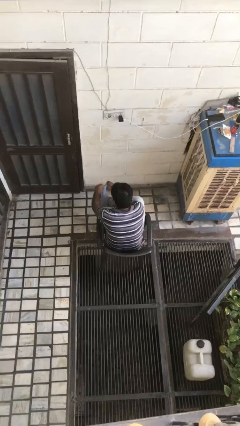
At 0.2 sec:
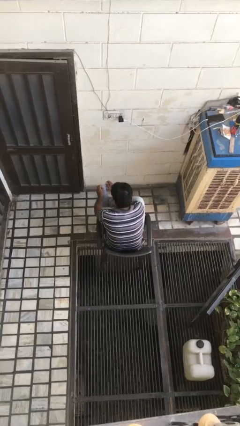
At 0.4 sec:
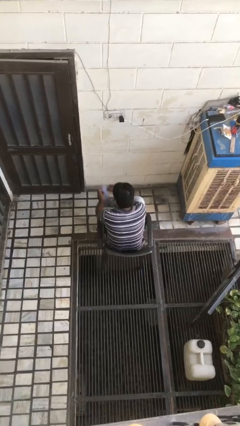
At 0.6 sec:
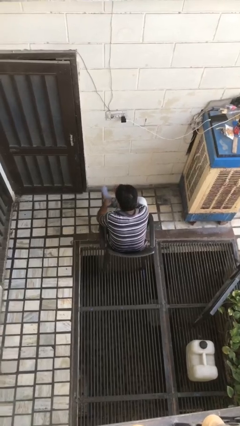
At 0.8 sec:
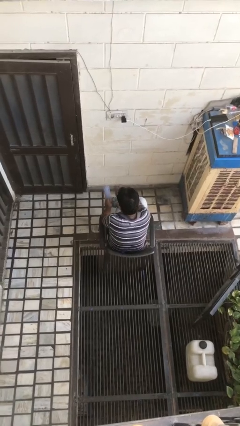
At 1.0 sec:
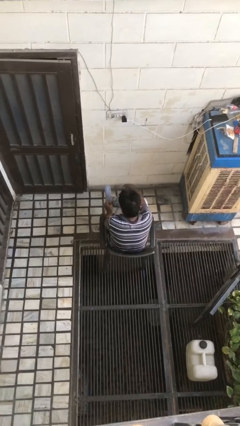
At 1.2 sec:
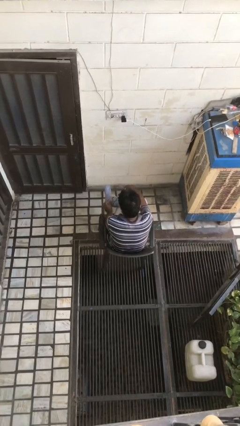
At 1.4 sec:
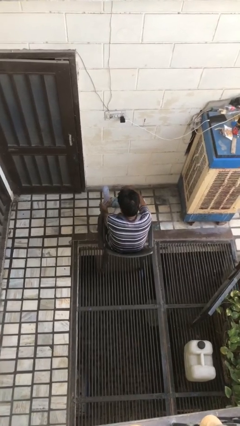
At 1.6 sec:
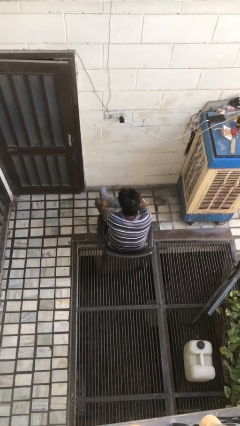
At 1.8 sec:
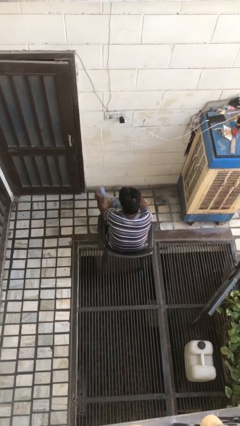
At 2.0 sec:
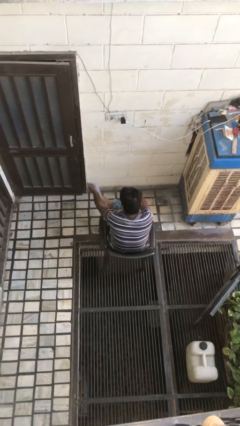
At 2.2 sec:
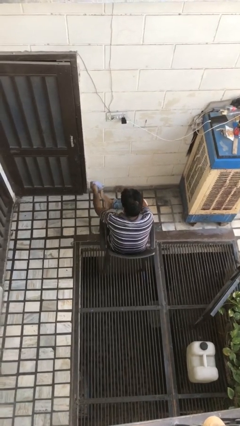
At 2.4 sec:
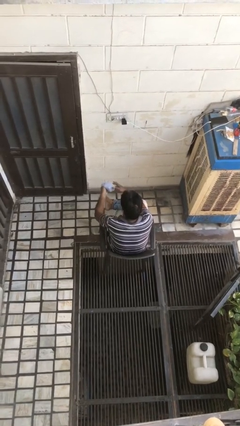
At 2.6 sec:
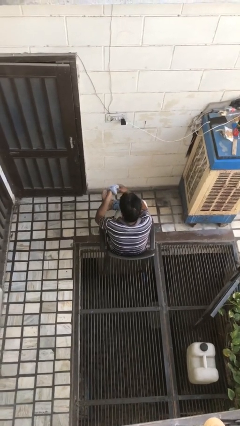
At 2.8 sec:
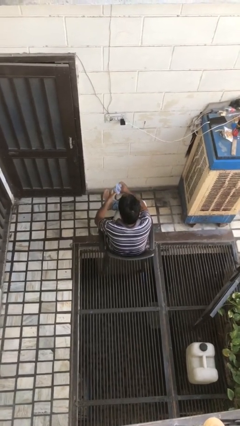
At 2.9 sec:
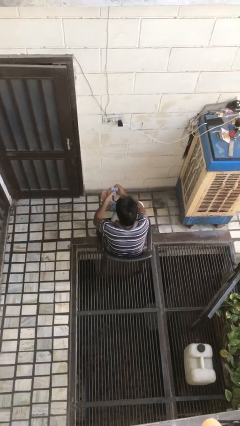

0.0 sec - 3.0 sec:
person takes off socks

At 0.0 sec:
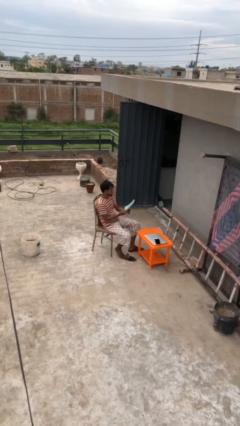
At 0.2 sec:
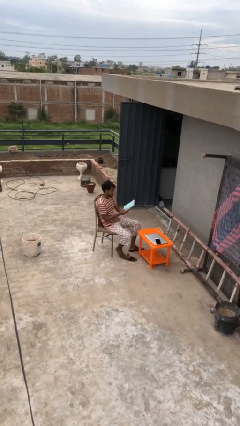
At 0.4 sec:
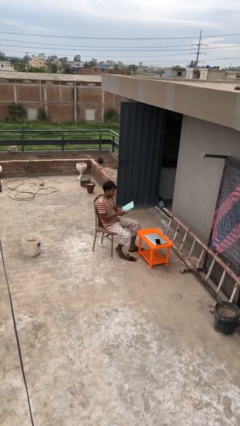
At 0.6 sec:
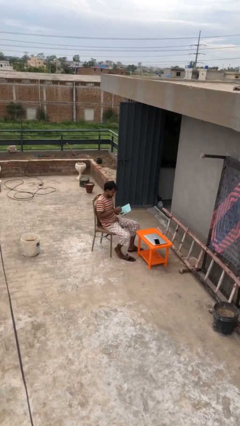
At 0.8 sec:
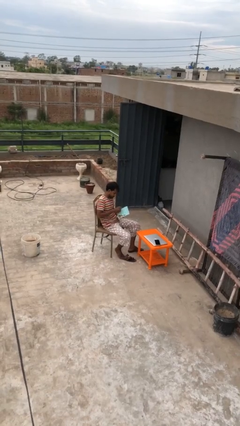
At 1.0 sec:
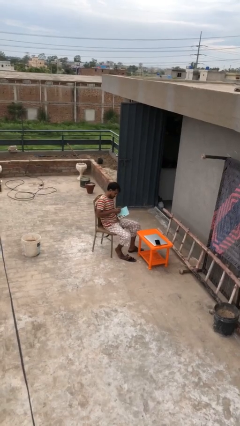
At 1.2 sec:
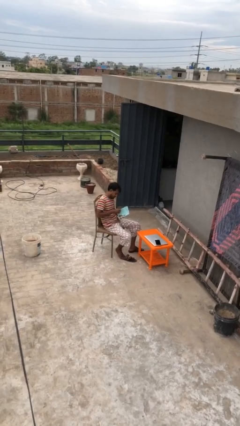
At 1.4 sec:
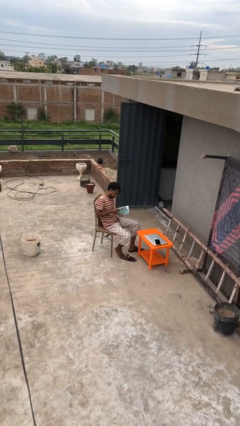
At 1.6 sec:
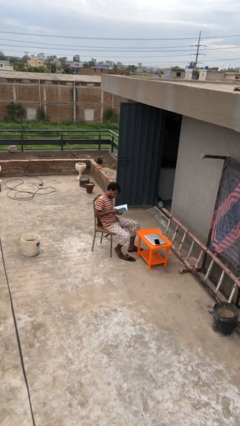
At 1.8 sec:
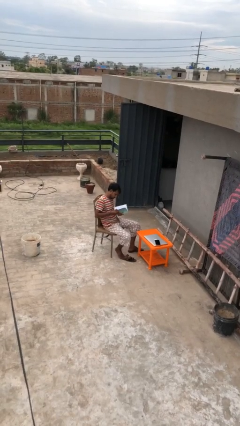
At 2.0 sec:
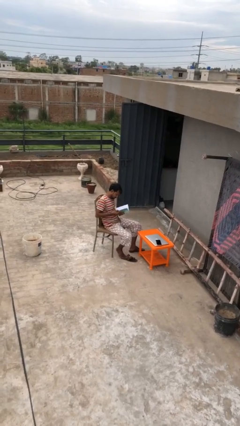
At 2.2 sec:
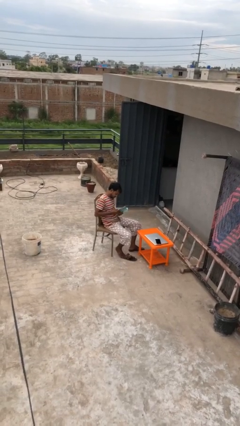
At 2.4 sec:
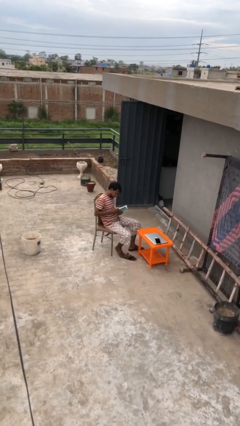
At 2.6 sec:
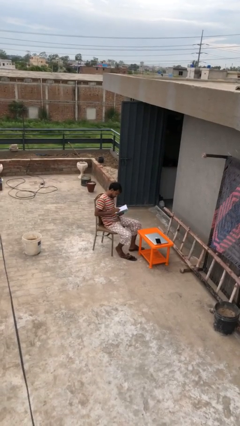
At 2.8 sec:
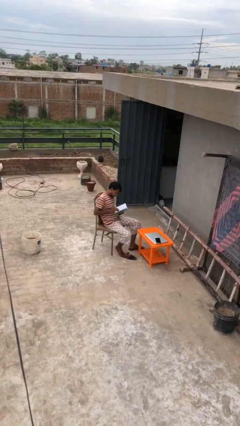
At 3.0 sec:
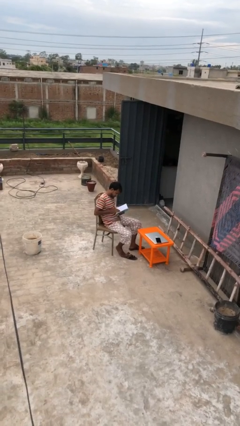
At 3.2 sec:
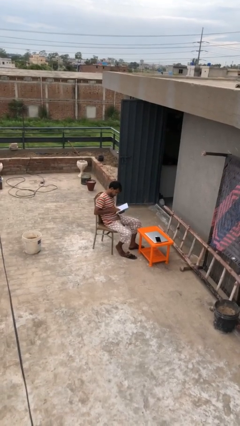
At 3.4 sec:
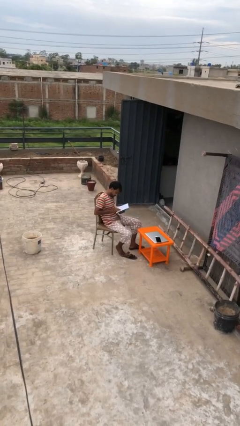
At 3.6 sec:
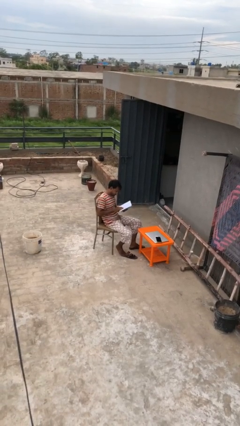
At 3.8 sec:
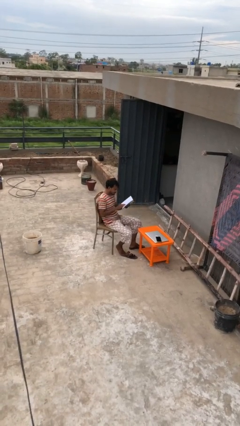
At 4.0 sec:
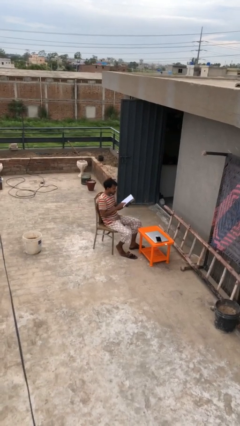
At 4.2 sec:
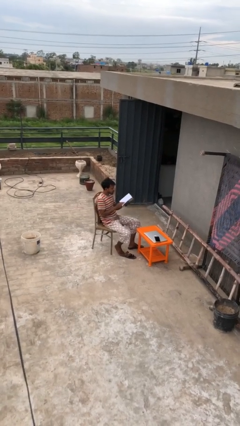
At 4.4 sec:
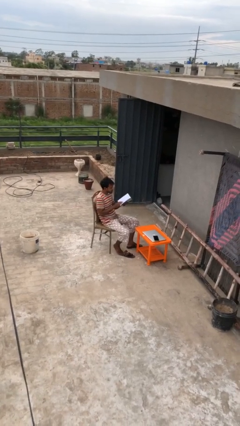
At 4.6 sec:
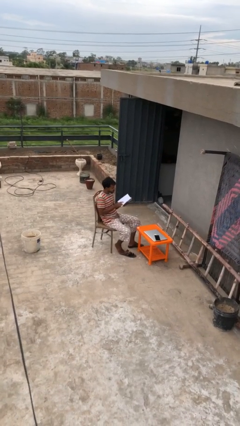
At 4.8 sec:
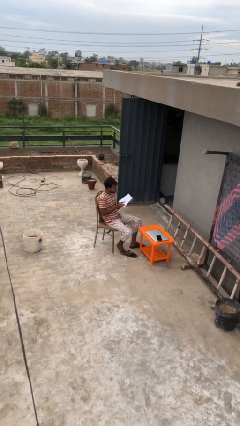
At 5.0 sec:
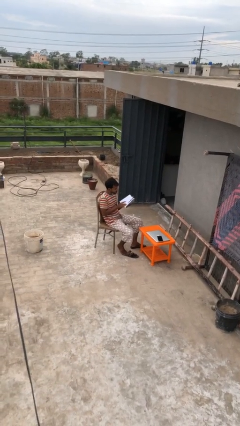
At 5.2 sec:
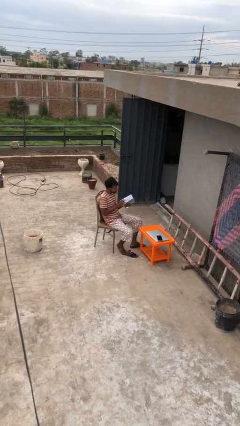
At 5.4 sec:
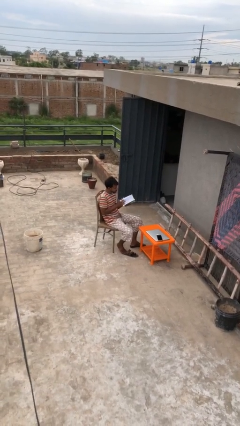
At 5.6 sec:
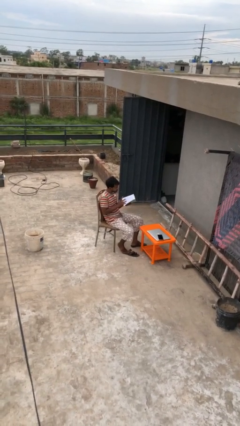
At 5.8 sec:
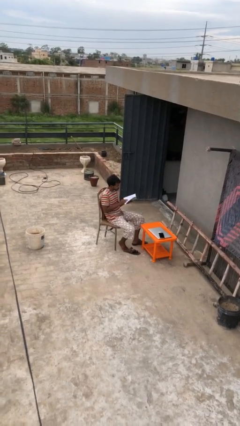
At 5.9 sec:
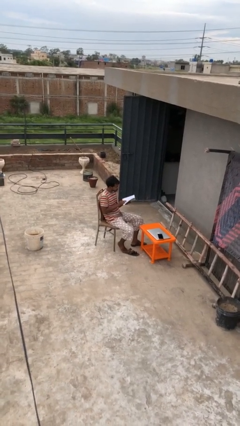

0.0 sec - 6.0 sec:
person reads document

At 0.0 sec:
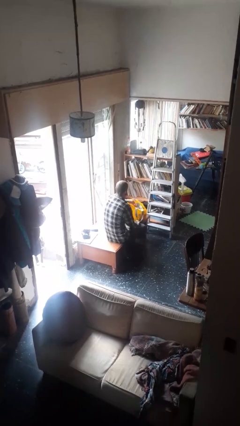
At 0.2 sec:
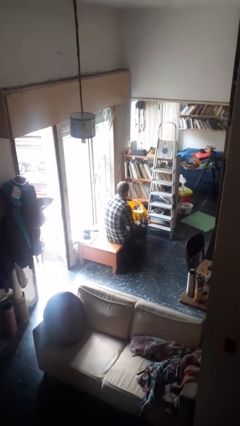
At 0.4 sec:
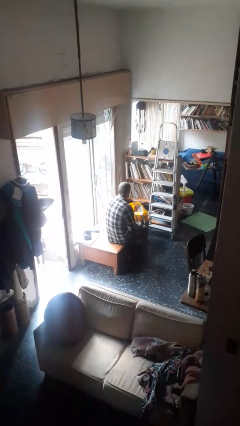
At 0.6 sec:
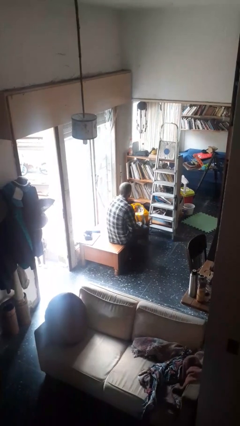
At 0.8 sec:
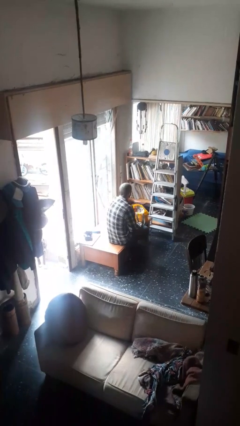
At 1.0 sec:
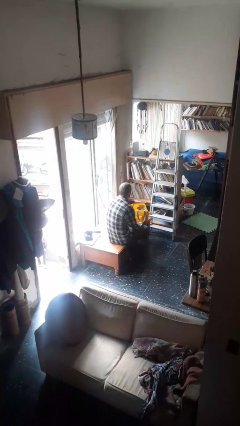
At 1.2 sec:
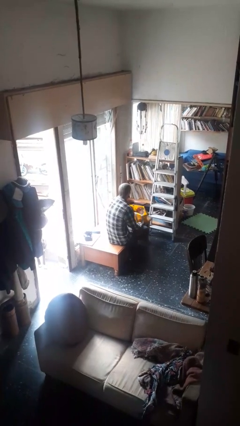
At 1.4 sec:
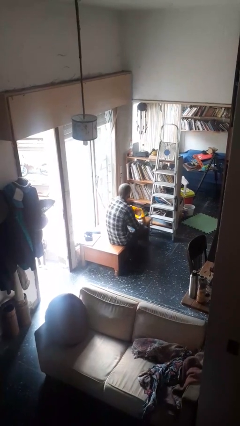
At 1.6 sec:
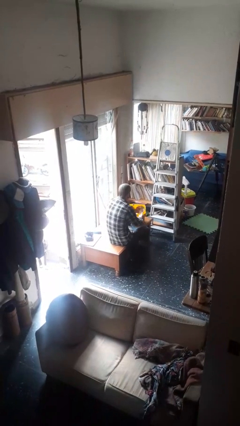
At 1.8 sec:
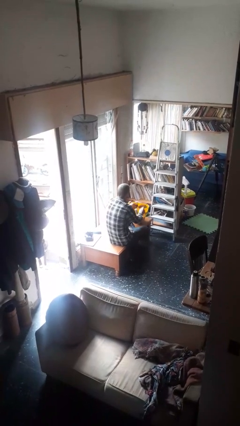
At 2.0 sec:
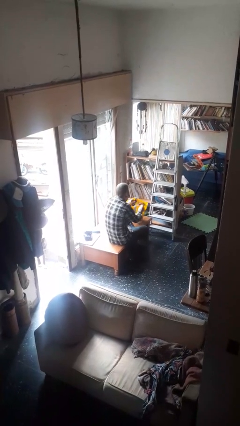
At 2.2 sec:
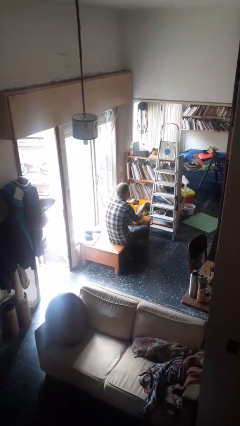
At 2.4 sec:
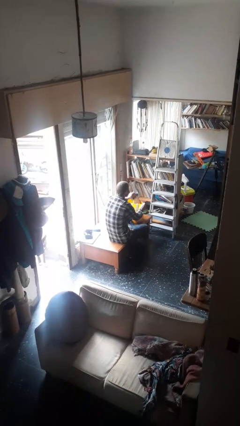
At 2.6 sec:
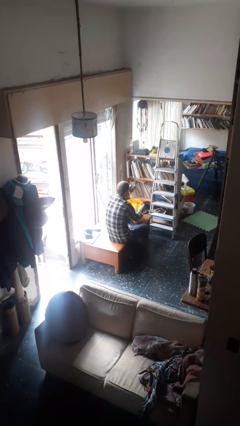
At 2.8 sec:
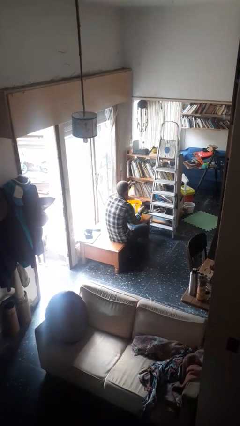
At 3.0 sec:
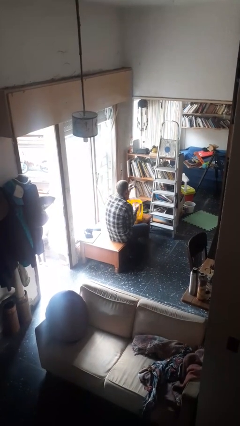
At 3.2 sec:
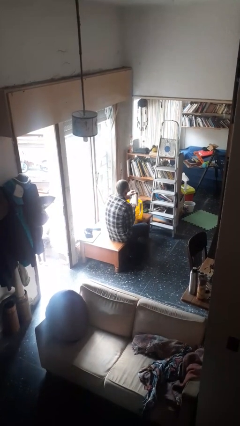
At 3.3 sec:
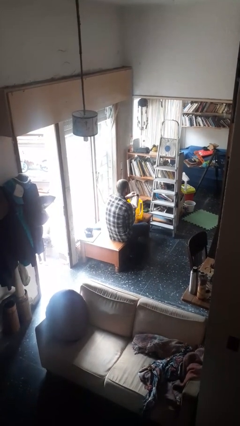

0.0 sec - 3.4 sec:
person takes object from bag

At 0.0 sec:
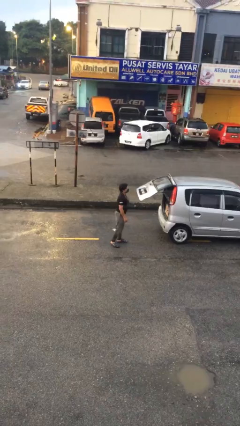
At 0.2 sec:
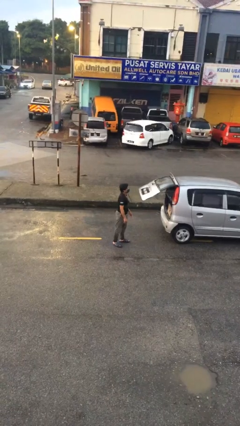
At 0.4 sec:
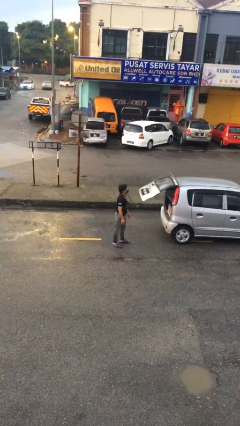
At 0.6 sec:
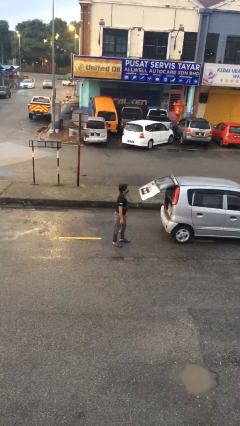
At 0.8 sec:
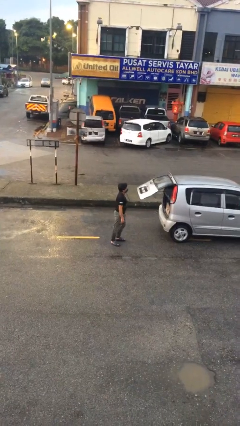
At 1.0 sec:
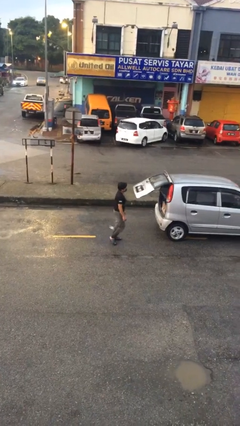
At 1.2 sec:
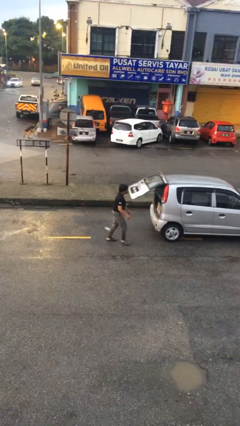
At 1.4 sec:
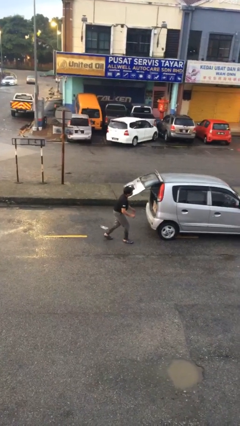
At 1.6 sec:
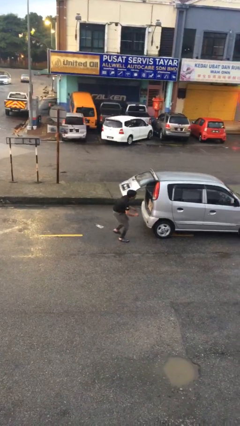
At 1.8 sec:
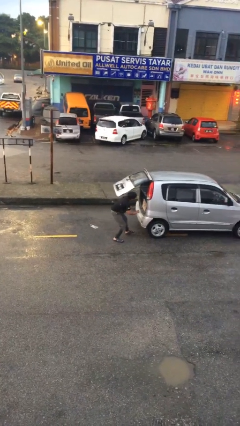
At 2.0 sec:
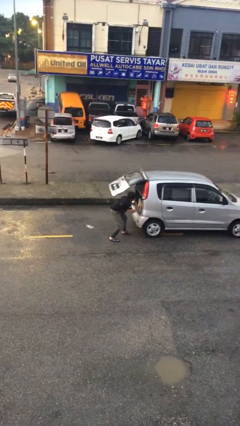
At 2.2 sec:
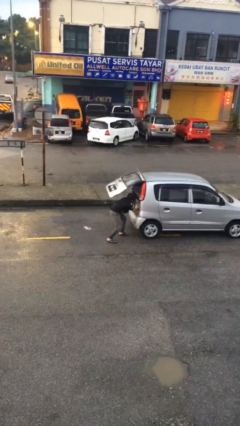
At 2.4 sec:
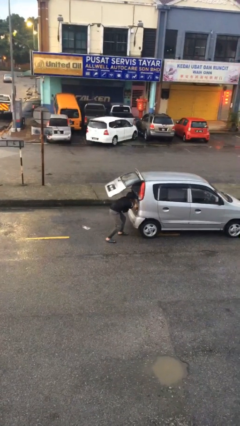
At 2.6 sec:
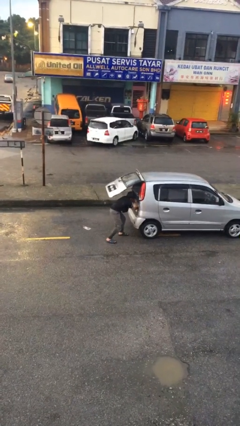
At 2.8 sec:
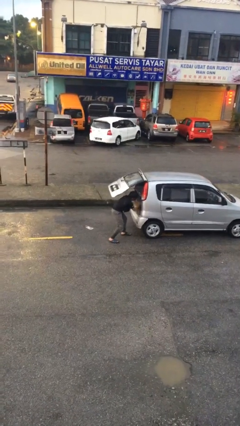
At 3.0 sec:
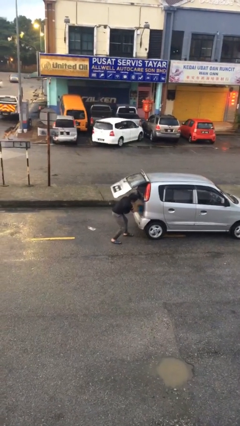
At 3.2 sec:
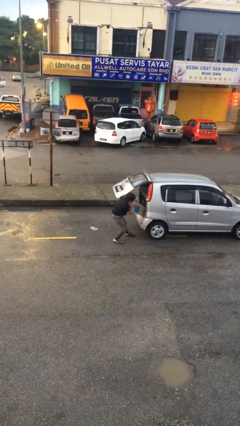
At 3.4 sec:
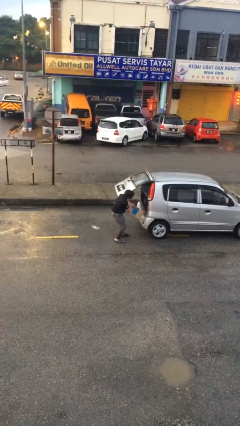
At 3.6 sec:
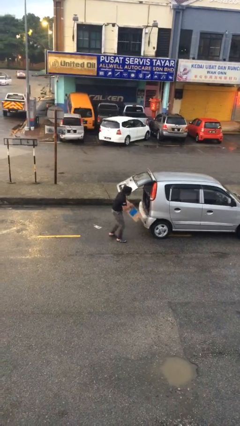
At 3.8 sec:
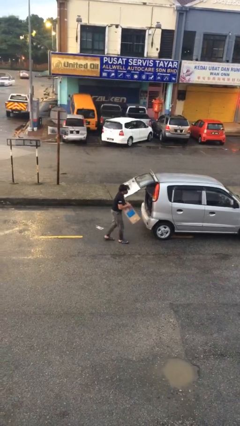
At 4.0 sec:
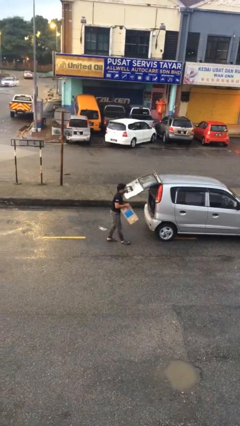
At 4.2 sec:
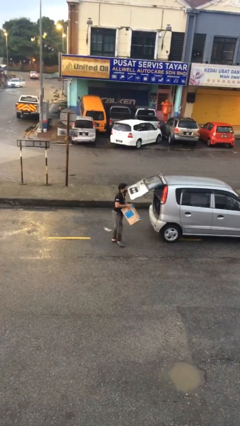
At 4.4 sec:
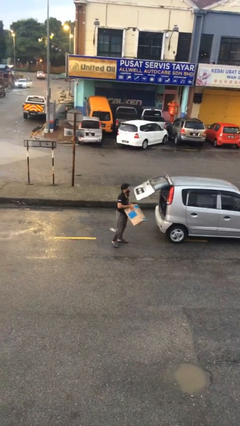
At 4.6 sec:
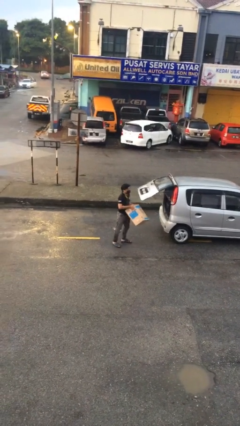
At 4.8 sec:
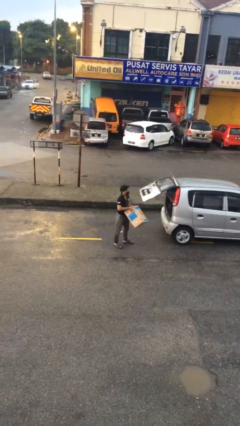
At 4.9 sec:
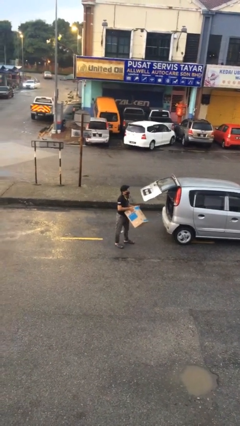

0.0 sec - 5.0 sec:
person unloads car

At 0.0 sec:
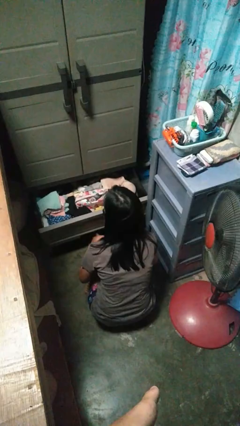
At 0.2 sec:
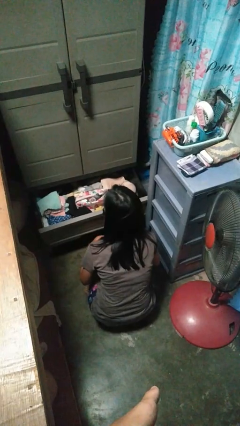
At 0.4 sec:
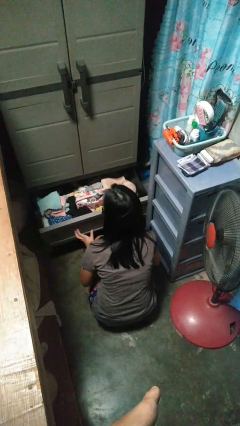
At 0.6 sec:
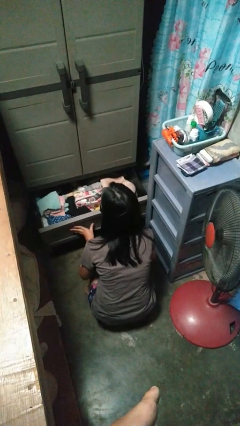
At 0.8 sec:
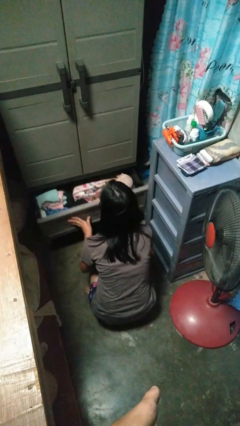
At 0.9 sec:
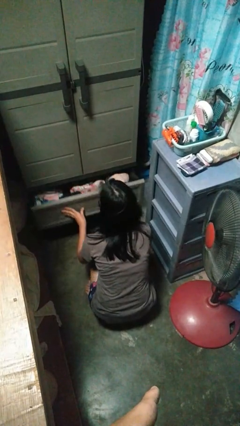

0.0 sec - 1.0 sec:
person closes dresser drawer
